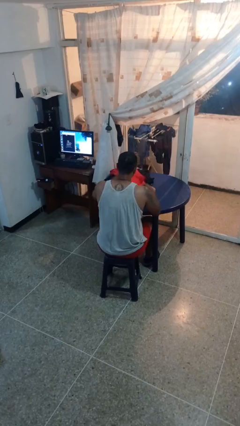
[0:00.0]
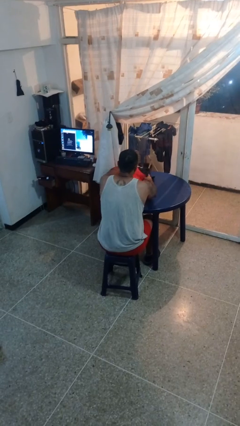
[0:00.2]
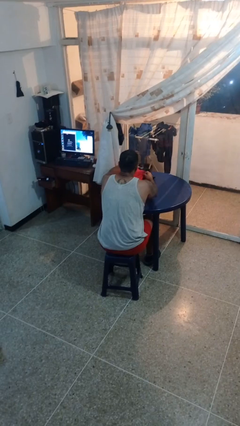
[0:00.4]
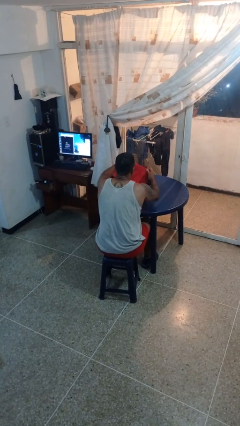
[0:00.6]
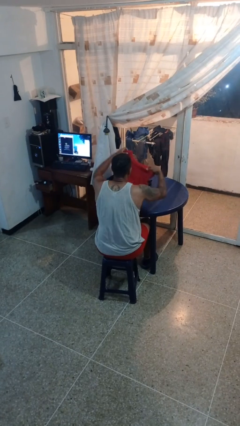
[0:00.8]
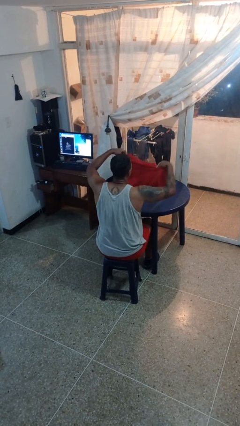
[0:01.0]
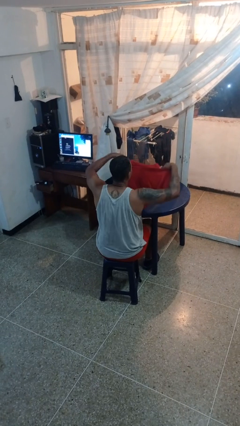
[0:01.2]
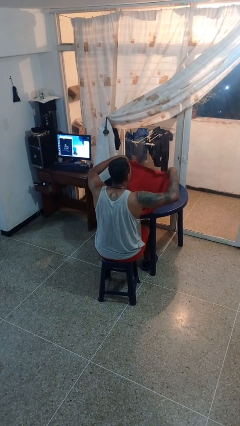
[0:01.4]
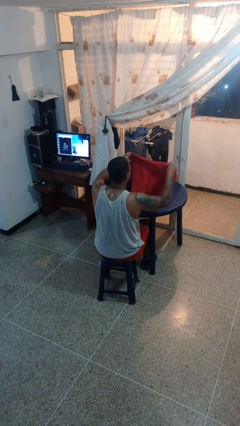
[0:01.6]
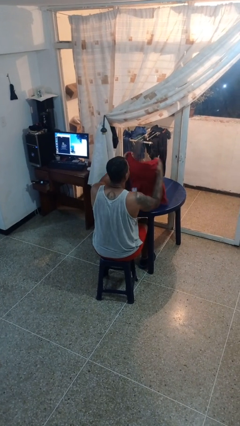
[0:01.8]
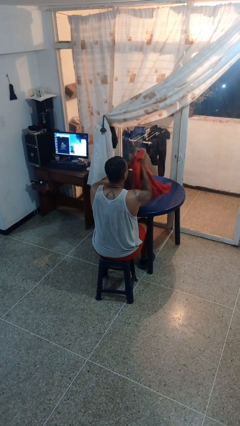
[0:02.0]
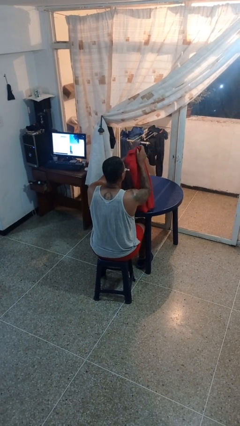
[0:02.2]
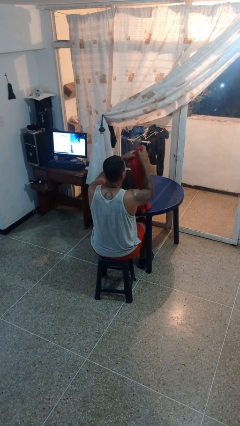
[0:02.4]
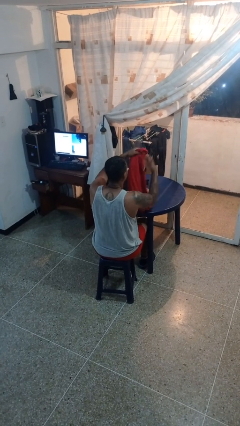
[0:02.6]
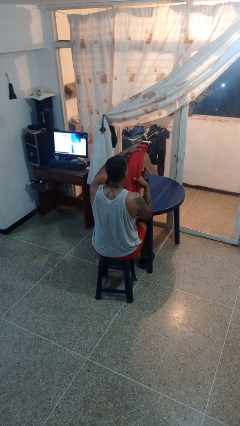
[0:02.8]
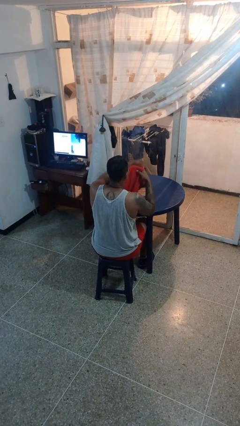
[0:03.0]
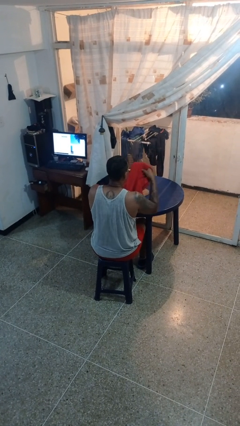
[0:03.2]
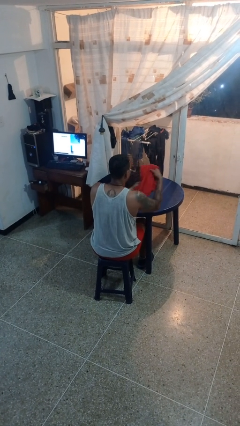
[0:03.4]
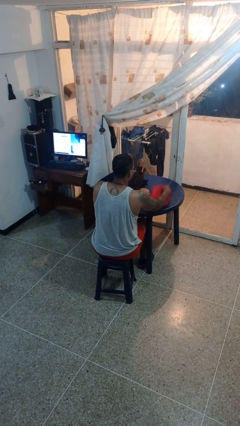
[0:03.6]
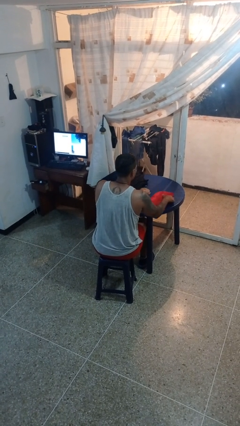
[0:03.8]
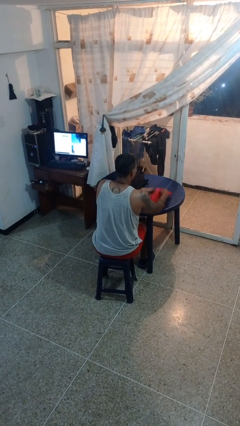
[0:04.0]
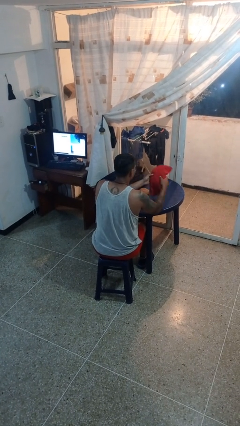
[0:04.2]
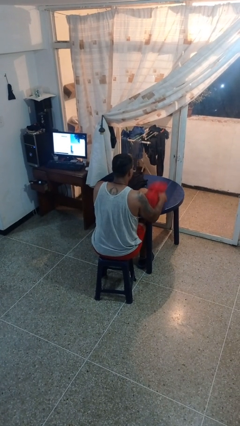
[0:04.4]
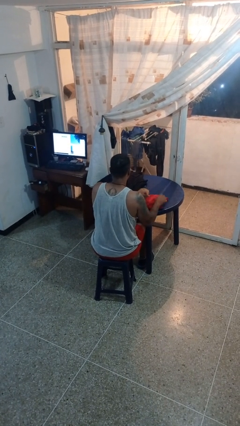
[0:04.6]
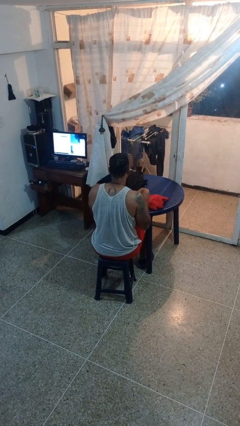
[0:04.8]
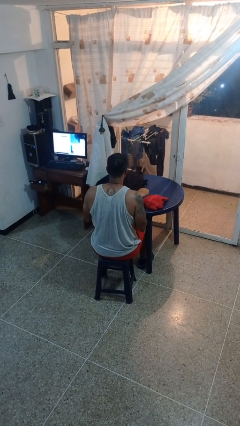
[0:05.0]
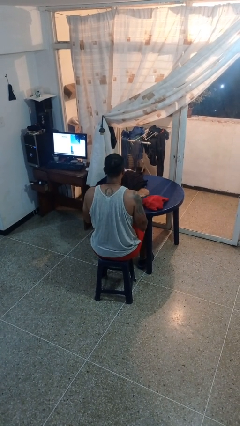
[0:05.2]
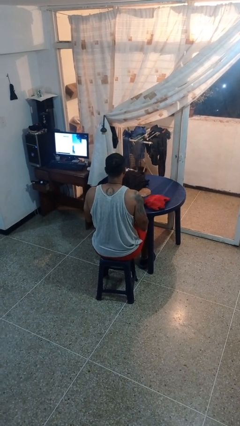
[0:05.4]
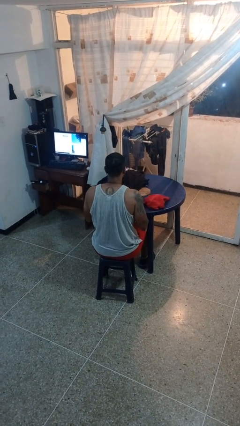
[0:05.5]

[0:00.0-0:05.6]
person folds shirt

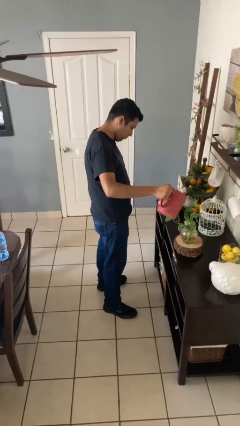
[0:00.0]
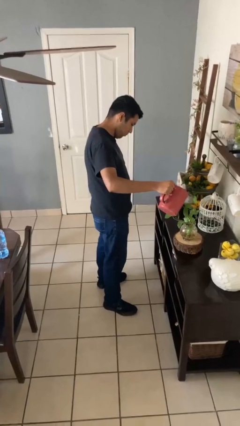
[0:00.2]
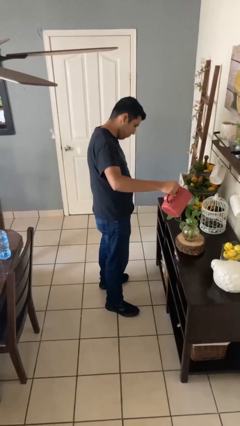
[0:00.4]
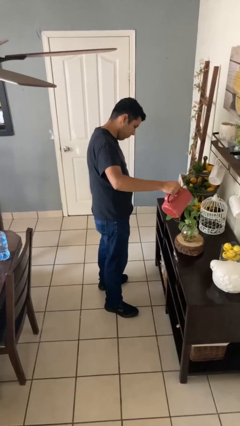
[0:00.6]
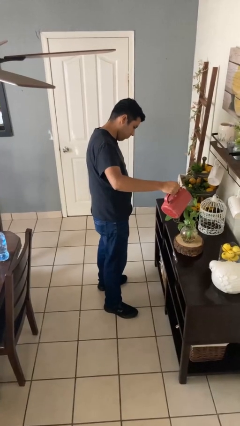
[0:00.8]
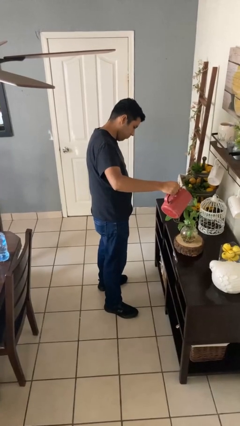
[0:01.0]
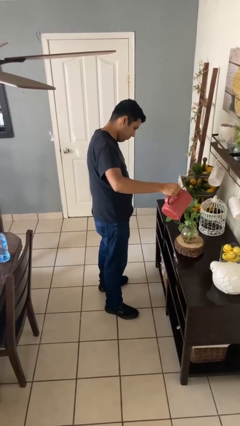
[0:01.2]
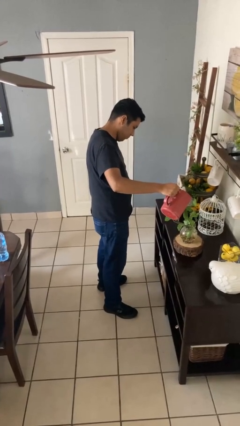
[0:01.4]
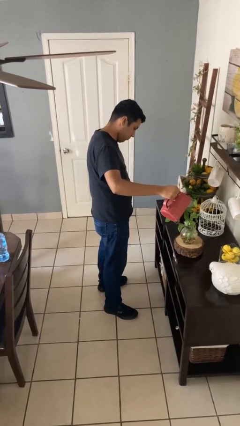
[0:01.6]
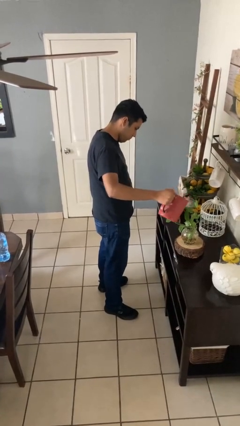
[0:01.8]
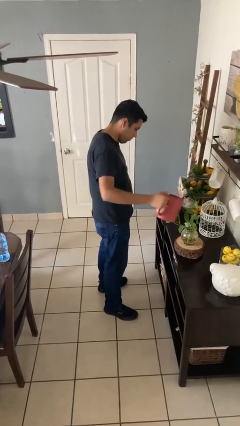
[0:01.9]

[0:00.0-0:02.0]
person waters houseplant

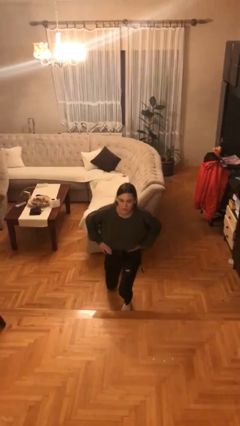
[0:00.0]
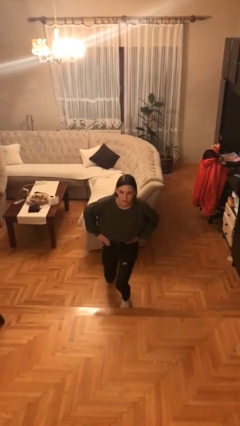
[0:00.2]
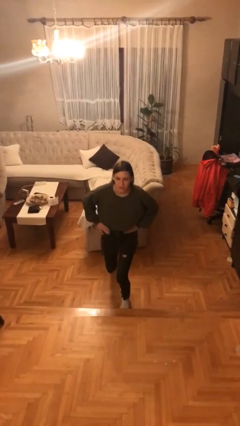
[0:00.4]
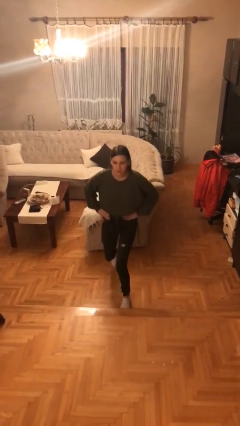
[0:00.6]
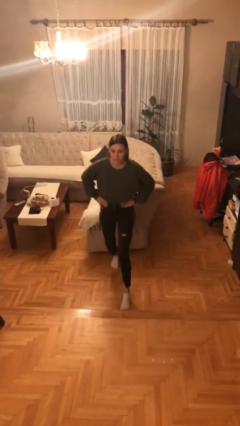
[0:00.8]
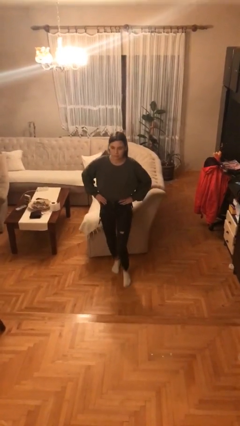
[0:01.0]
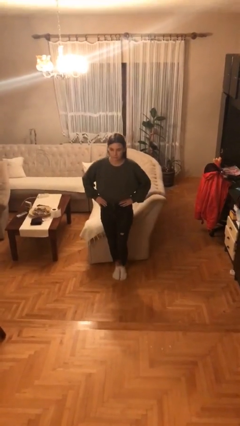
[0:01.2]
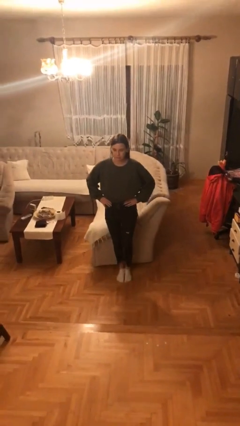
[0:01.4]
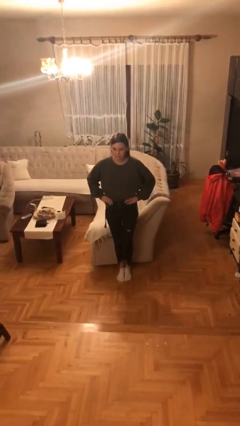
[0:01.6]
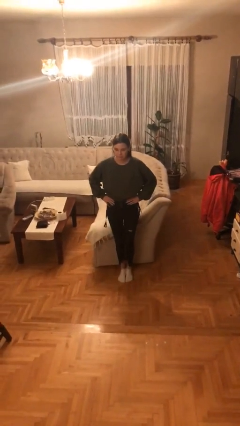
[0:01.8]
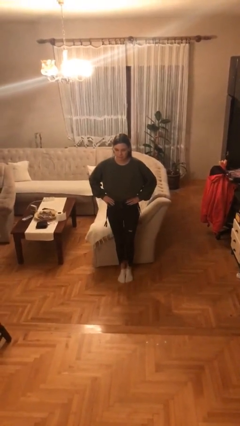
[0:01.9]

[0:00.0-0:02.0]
person exercises with lunges
